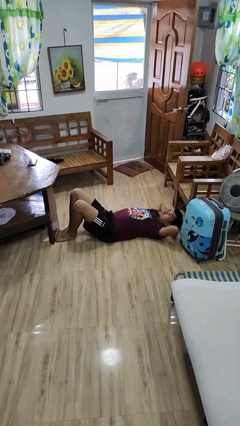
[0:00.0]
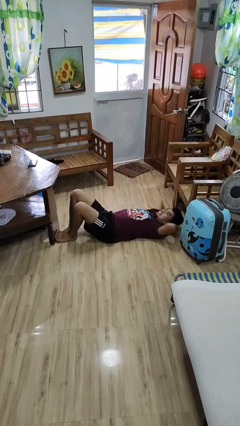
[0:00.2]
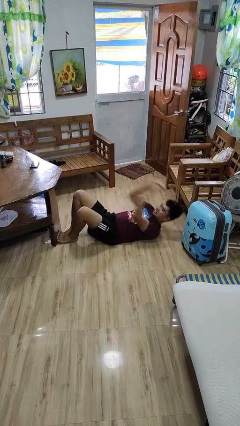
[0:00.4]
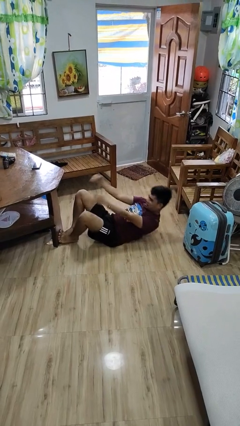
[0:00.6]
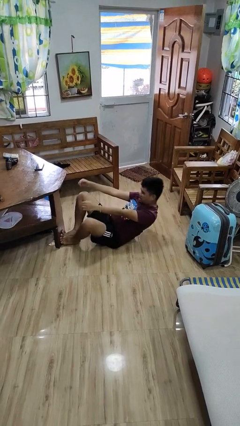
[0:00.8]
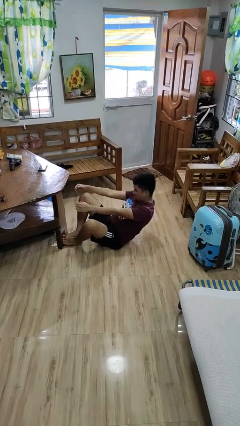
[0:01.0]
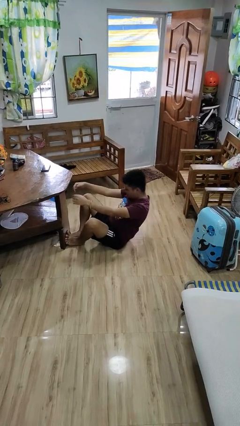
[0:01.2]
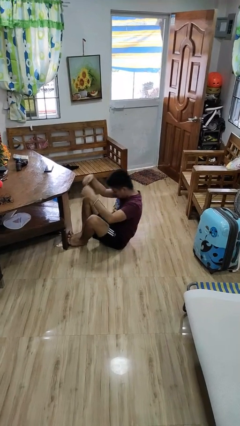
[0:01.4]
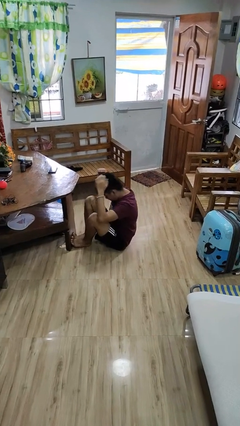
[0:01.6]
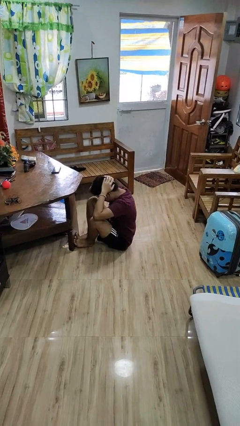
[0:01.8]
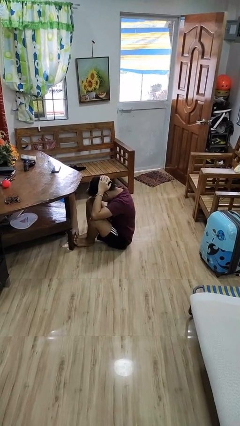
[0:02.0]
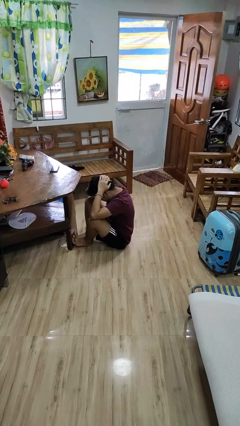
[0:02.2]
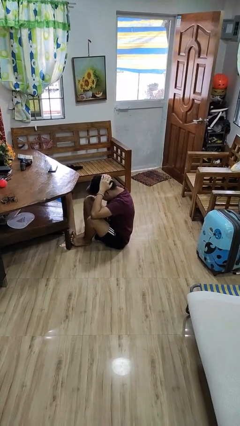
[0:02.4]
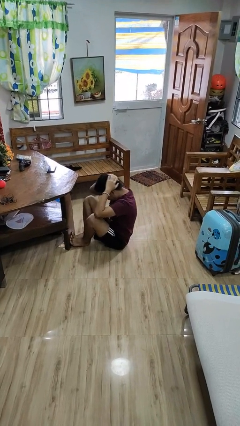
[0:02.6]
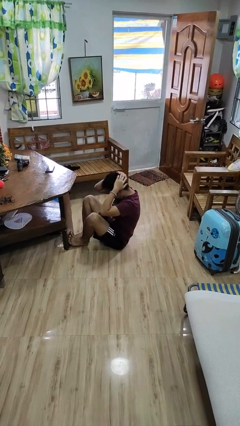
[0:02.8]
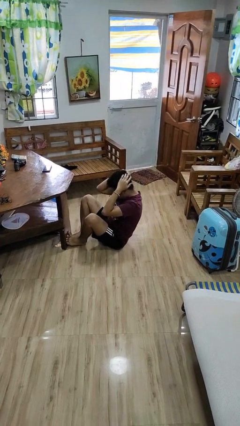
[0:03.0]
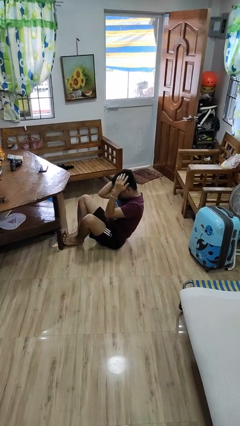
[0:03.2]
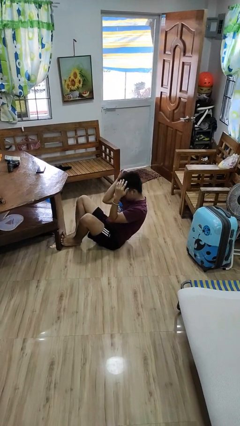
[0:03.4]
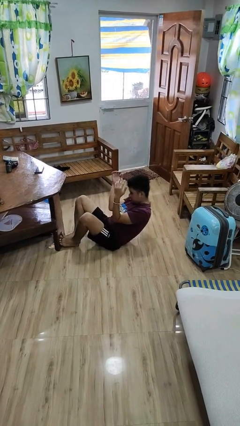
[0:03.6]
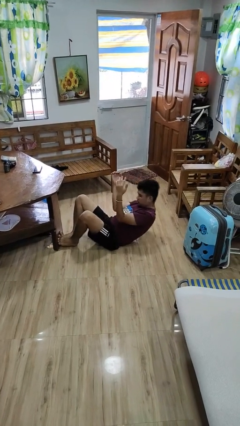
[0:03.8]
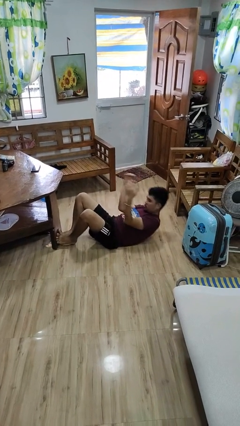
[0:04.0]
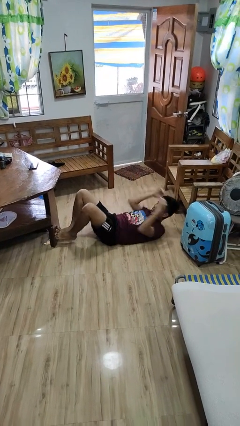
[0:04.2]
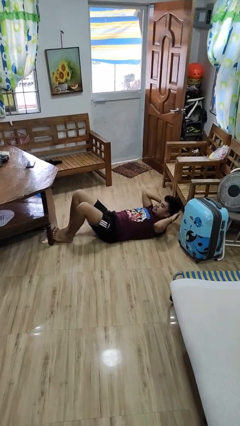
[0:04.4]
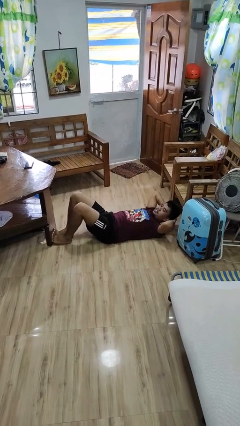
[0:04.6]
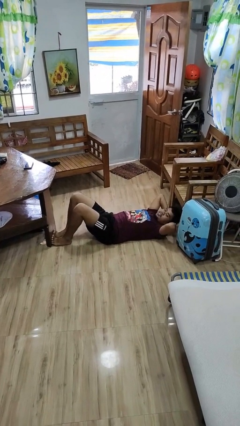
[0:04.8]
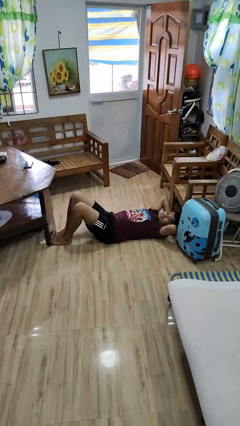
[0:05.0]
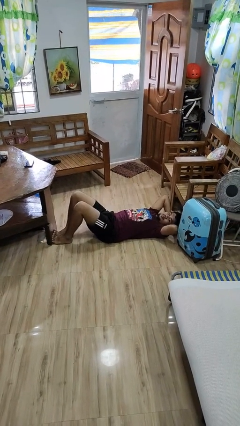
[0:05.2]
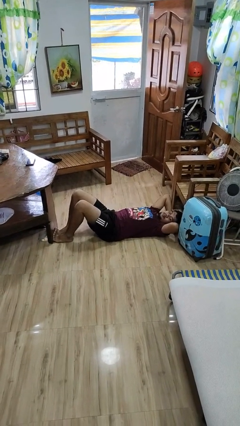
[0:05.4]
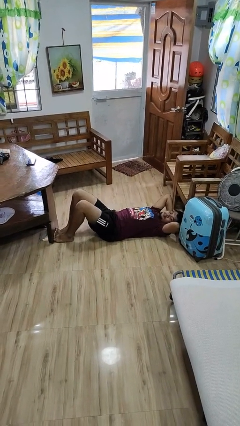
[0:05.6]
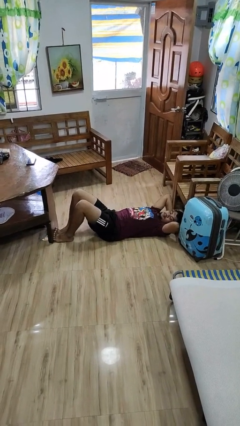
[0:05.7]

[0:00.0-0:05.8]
person exercises with situp

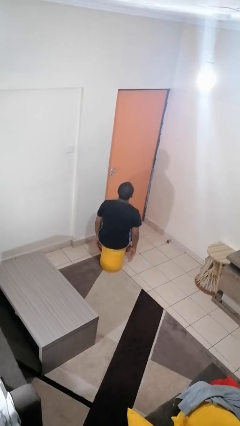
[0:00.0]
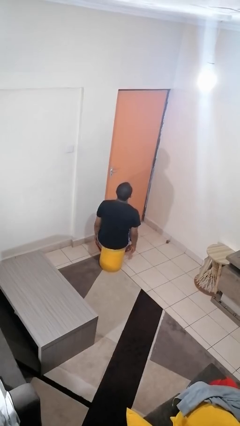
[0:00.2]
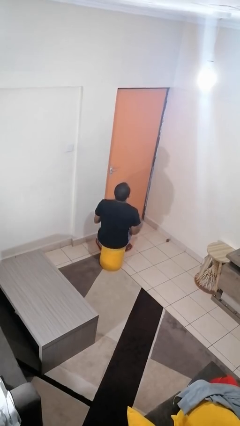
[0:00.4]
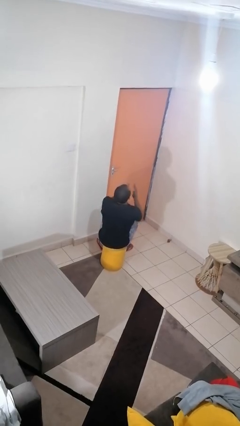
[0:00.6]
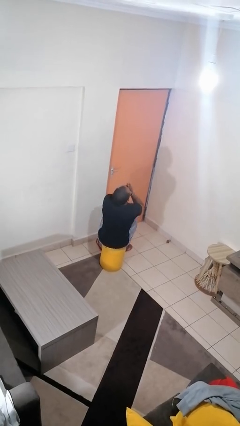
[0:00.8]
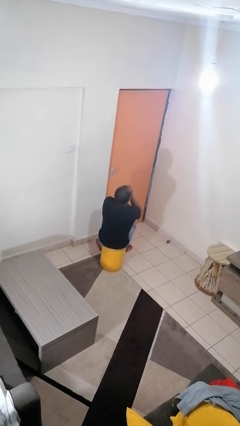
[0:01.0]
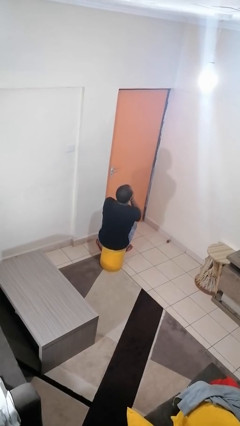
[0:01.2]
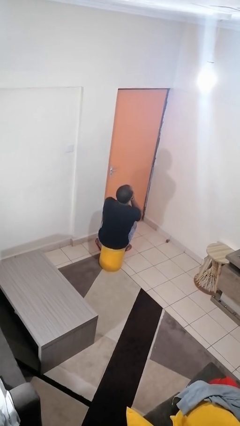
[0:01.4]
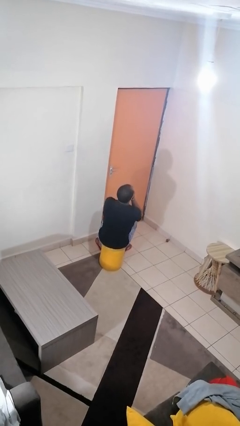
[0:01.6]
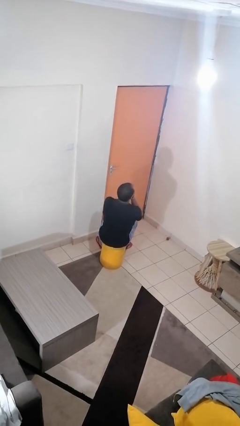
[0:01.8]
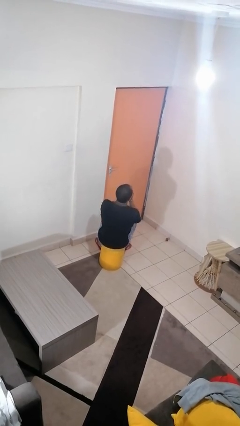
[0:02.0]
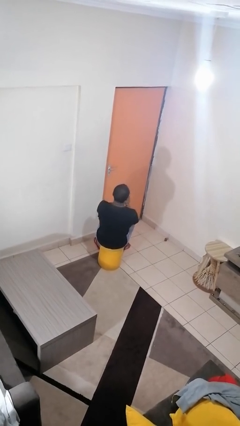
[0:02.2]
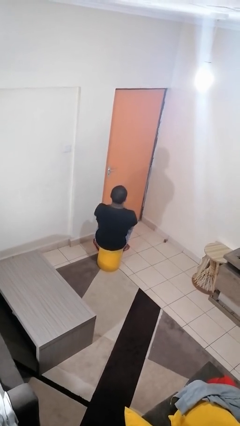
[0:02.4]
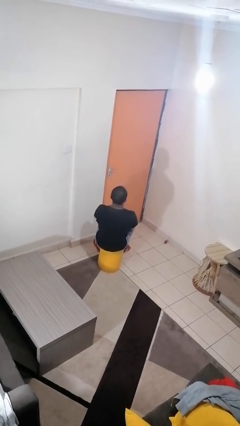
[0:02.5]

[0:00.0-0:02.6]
person sneezes into hand

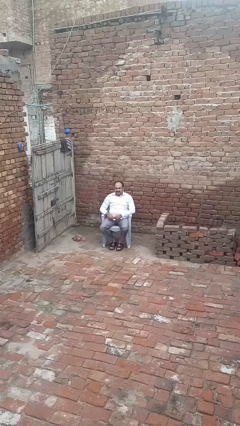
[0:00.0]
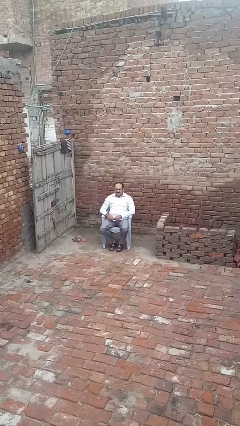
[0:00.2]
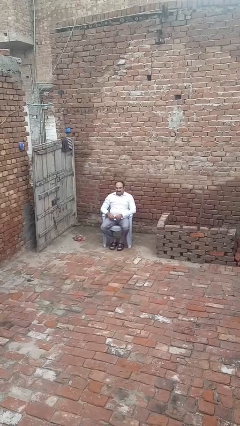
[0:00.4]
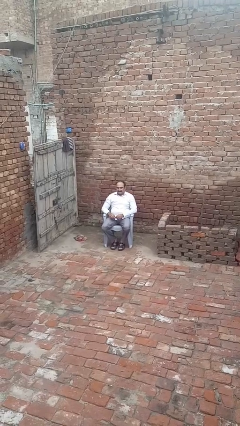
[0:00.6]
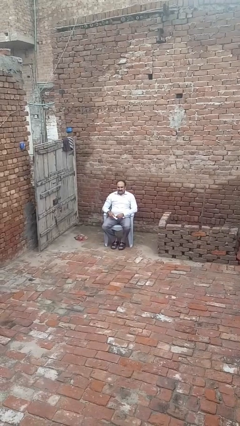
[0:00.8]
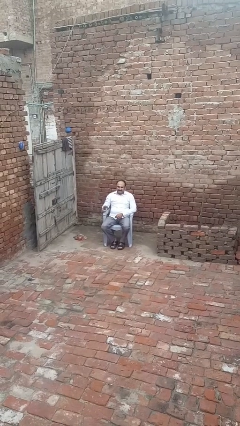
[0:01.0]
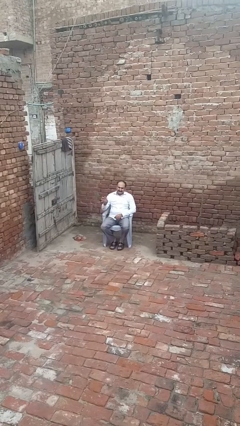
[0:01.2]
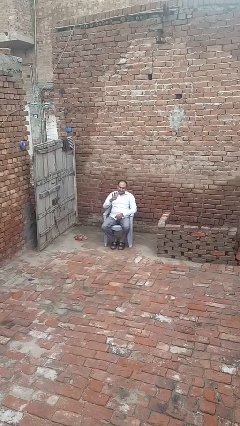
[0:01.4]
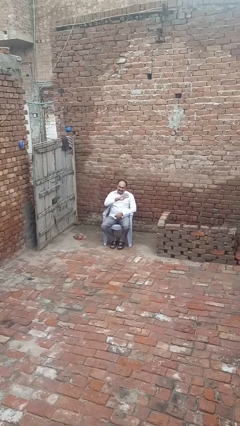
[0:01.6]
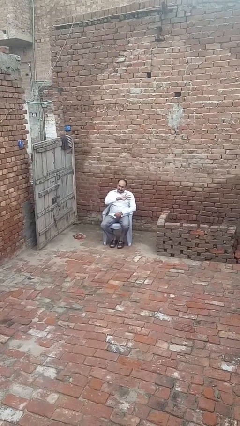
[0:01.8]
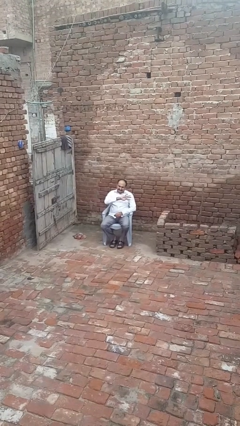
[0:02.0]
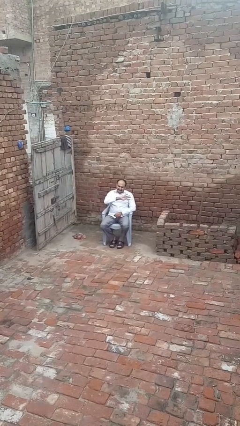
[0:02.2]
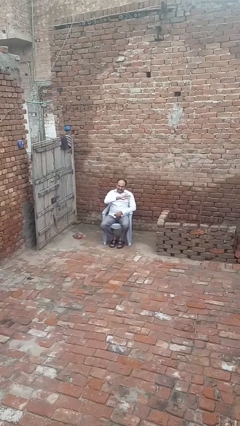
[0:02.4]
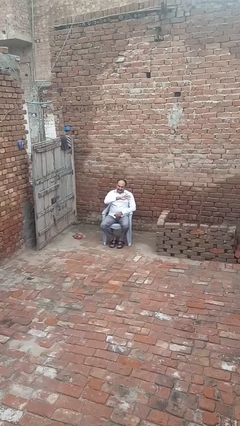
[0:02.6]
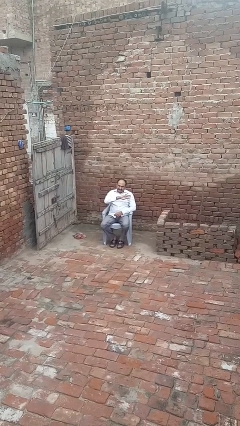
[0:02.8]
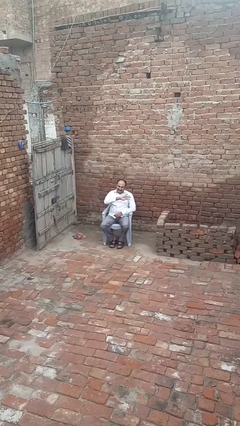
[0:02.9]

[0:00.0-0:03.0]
person gestures swipe left

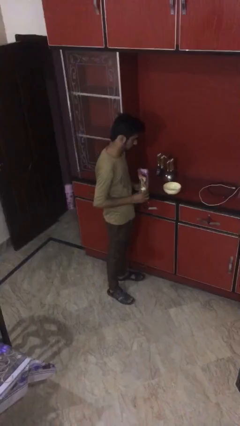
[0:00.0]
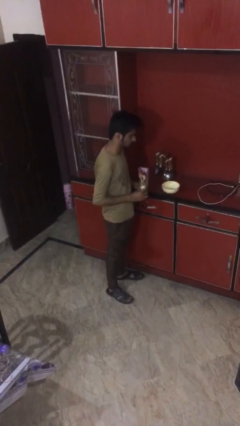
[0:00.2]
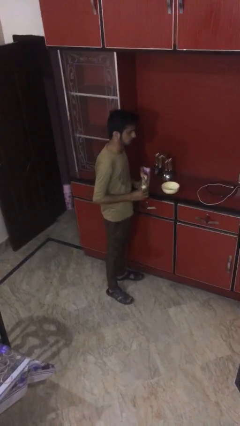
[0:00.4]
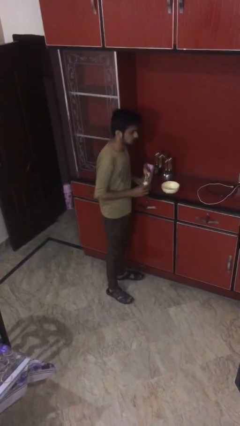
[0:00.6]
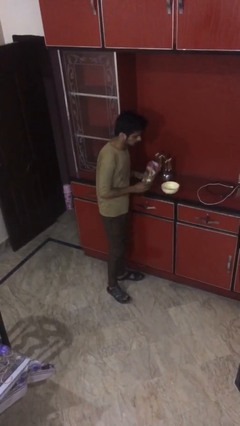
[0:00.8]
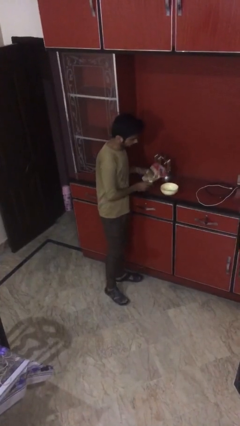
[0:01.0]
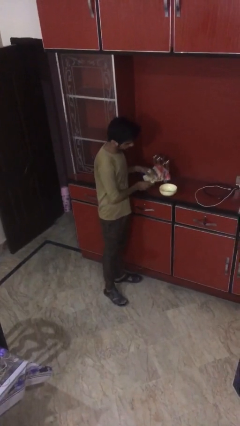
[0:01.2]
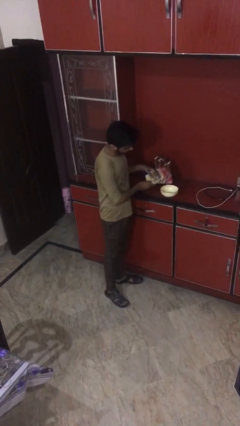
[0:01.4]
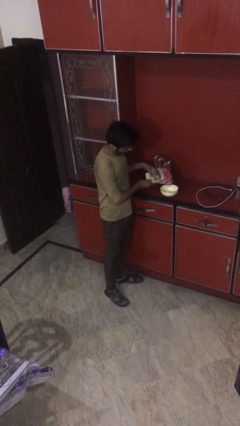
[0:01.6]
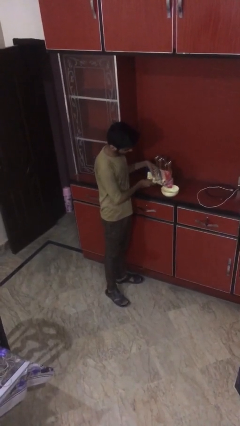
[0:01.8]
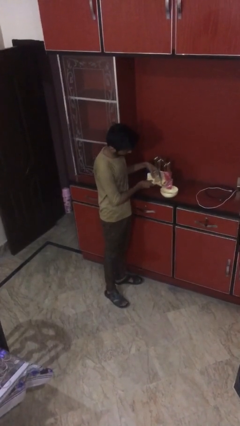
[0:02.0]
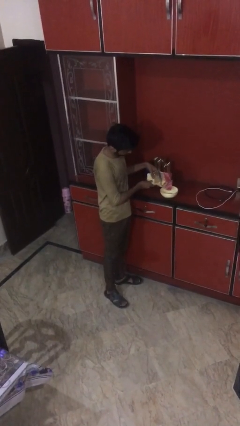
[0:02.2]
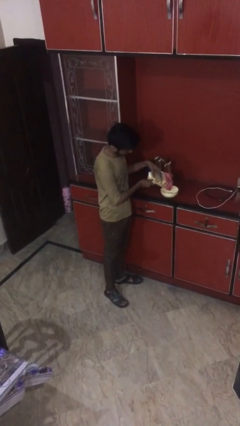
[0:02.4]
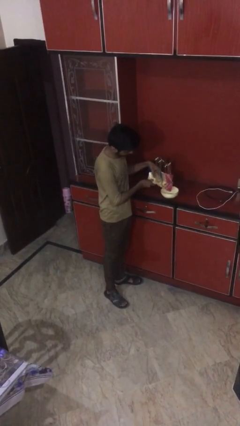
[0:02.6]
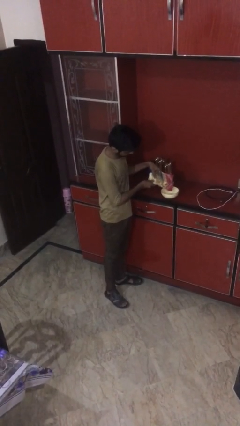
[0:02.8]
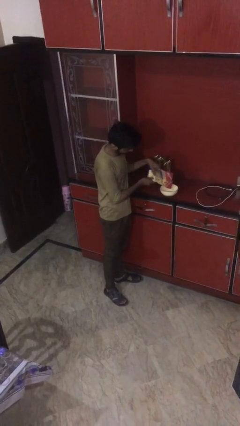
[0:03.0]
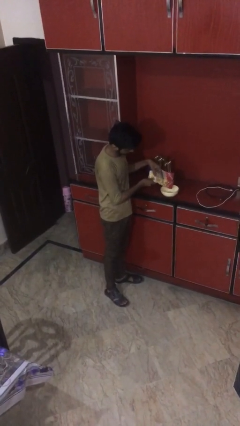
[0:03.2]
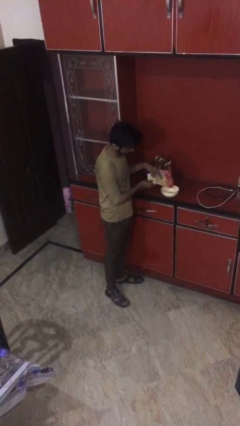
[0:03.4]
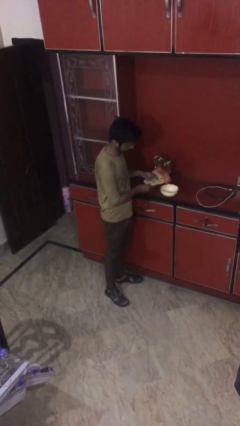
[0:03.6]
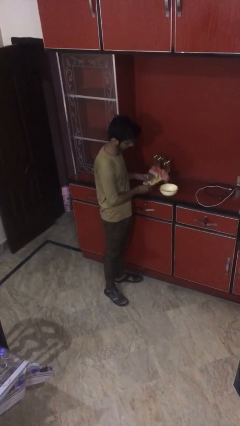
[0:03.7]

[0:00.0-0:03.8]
person pours into bowl

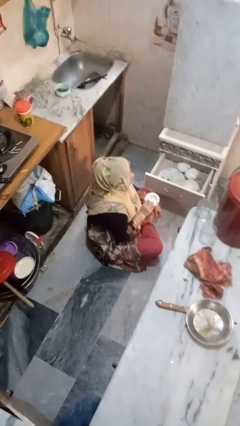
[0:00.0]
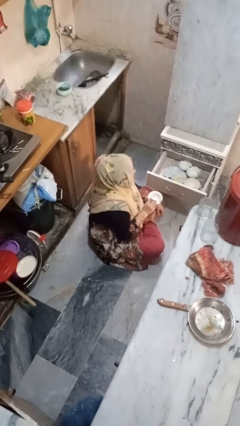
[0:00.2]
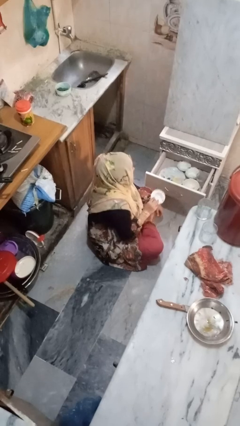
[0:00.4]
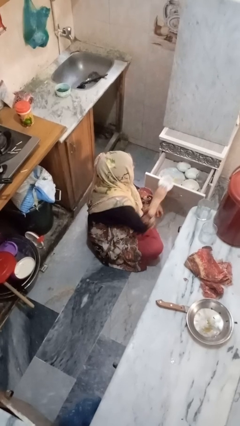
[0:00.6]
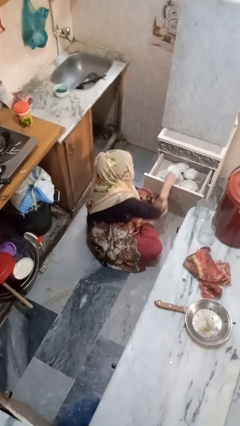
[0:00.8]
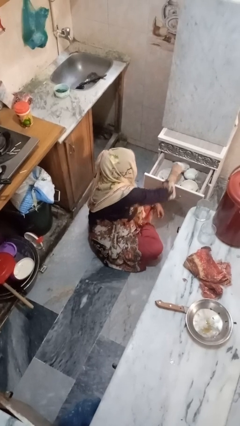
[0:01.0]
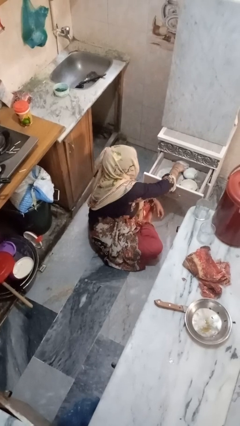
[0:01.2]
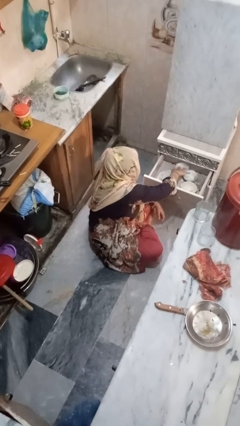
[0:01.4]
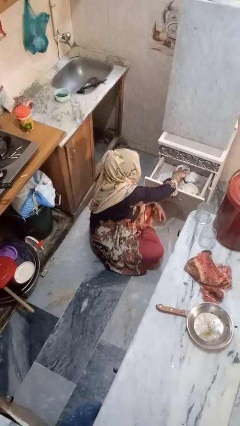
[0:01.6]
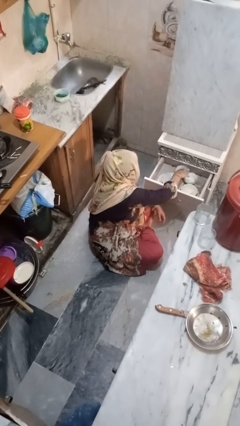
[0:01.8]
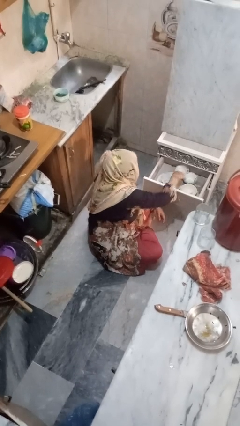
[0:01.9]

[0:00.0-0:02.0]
person puts object into kitchen drawer

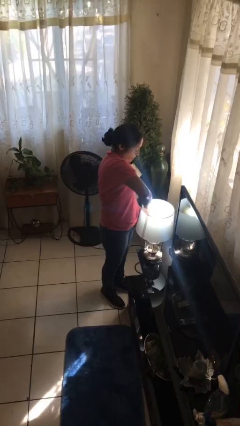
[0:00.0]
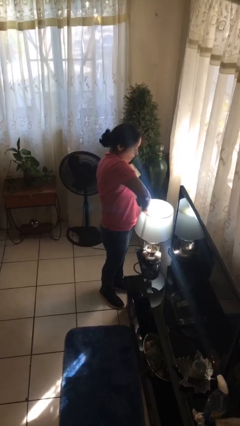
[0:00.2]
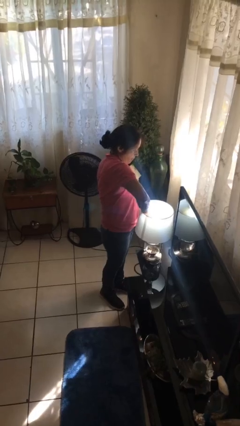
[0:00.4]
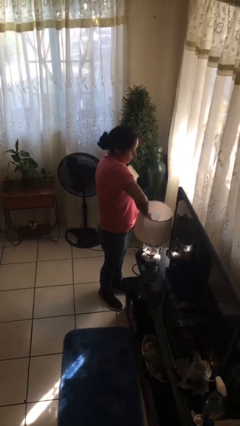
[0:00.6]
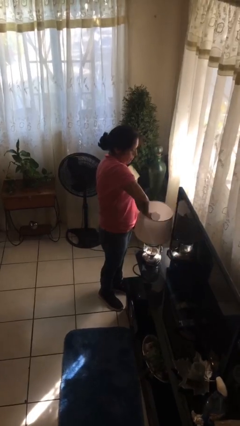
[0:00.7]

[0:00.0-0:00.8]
person turns off lamp
